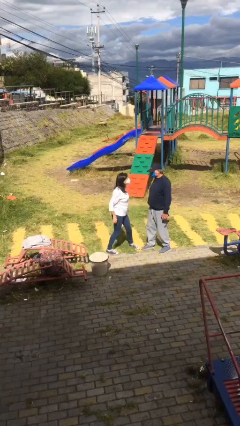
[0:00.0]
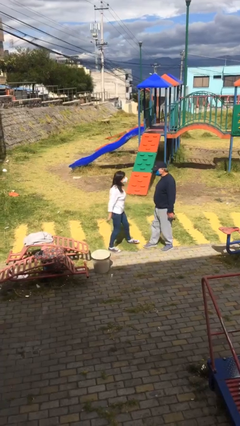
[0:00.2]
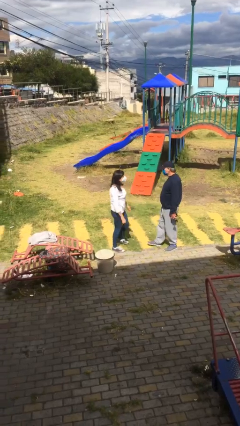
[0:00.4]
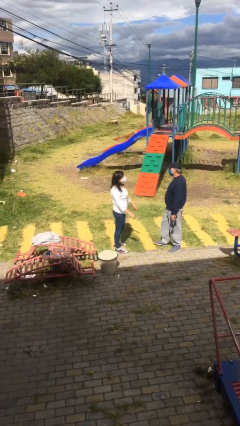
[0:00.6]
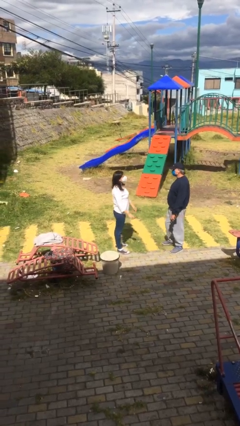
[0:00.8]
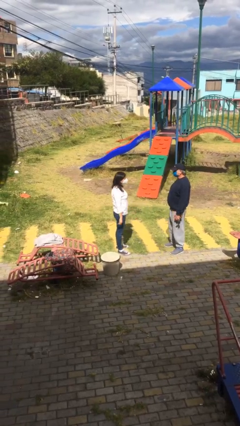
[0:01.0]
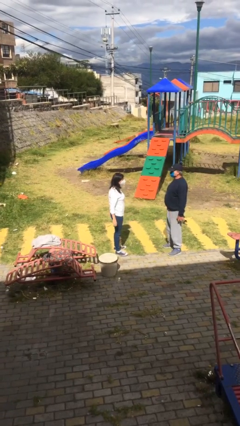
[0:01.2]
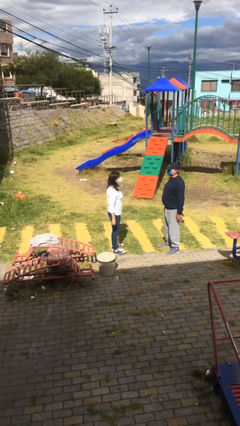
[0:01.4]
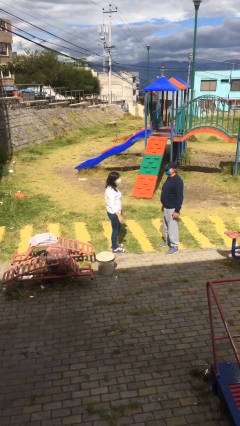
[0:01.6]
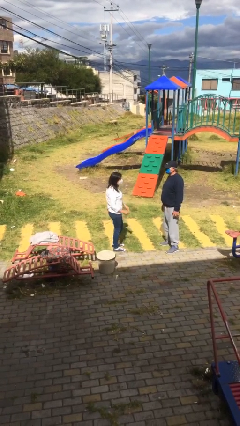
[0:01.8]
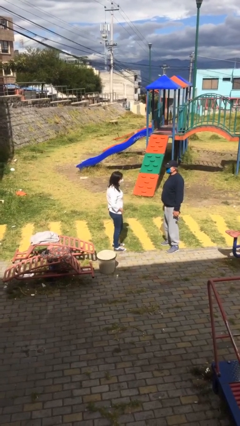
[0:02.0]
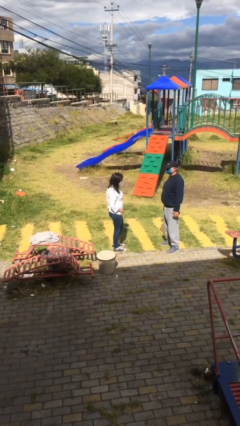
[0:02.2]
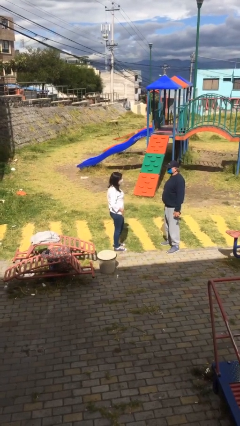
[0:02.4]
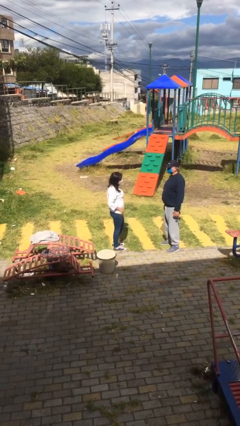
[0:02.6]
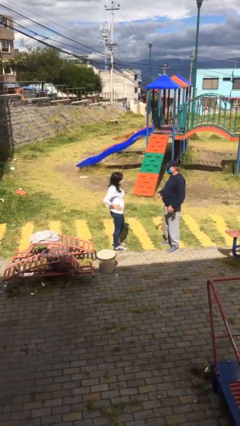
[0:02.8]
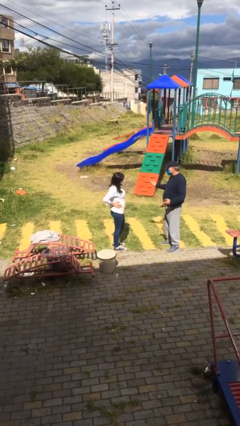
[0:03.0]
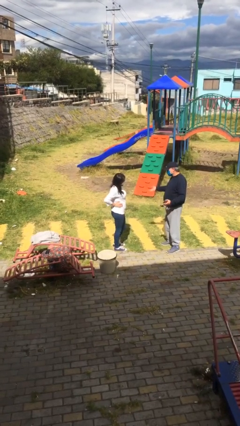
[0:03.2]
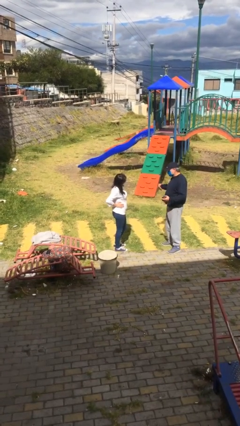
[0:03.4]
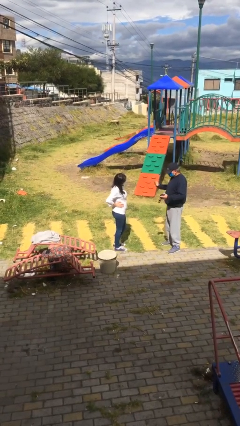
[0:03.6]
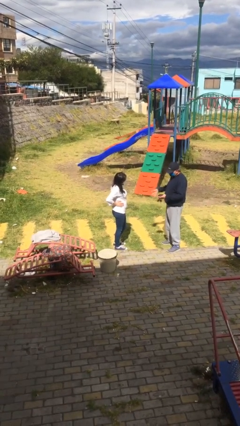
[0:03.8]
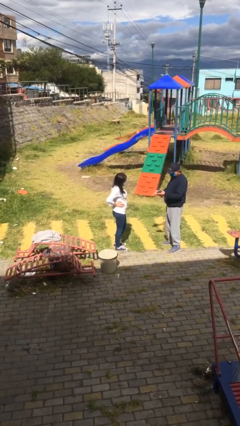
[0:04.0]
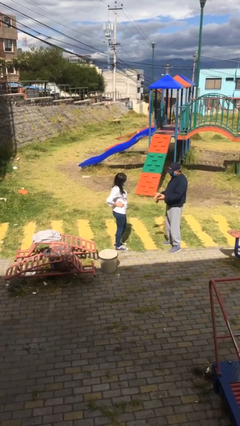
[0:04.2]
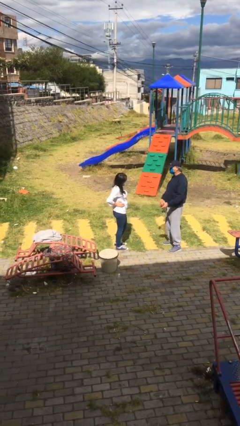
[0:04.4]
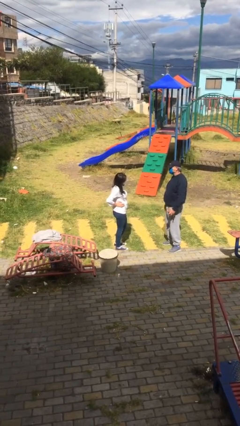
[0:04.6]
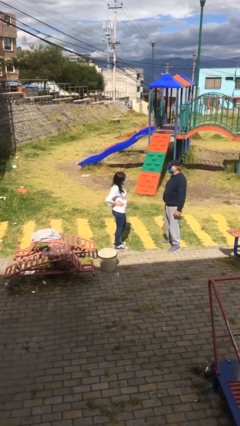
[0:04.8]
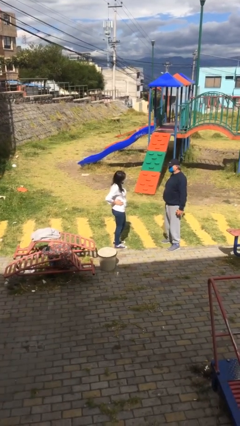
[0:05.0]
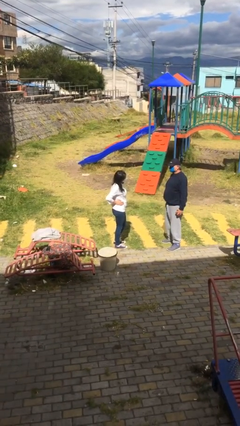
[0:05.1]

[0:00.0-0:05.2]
person talks to person

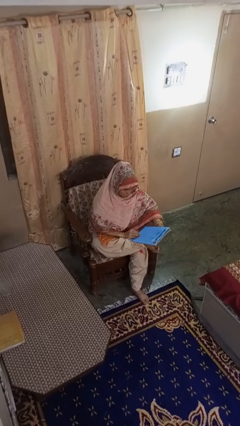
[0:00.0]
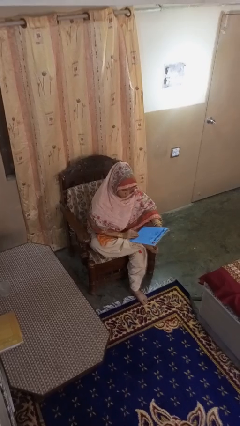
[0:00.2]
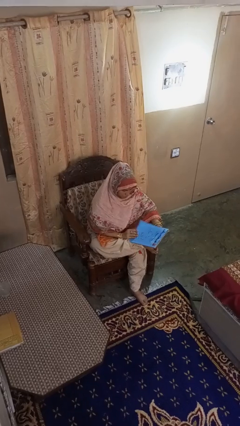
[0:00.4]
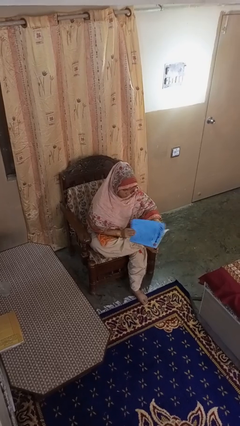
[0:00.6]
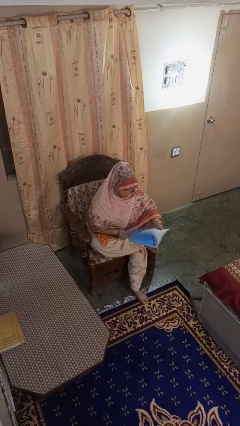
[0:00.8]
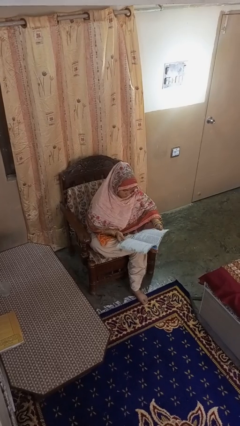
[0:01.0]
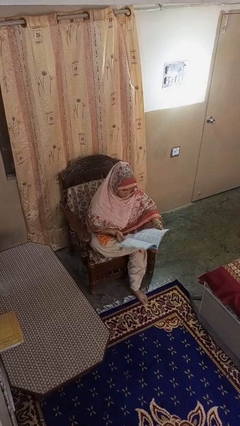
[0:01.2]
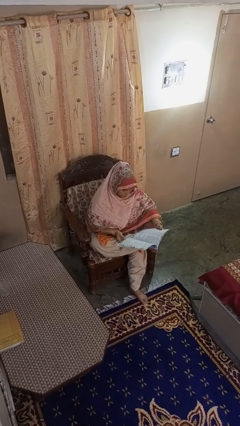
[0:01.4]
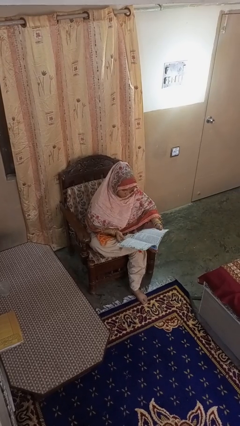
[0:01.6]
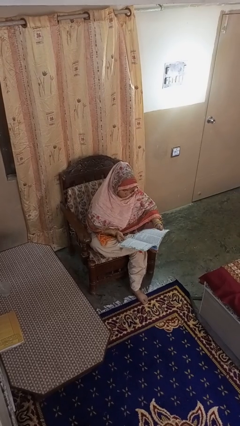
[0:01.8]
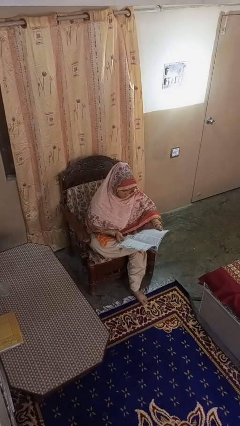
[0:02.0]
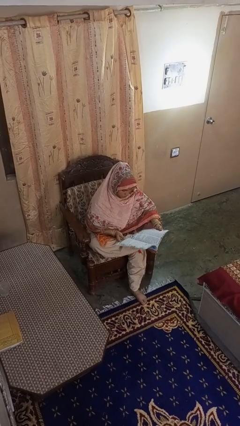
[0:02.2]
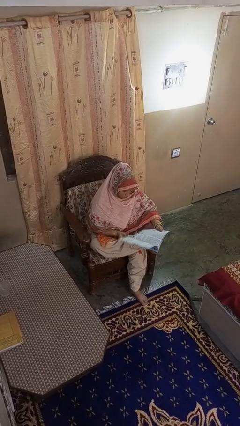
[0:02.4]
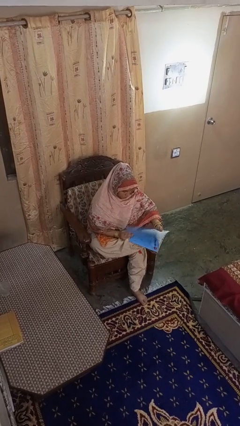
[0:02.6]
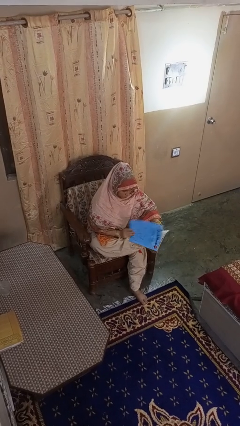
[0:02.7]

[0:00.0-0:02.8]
person reads magazine

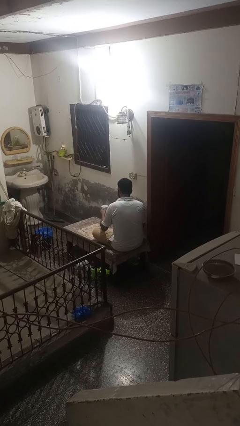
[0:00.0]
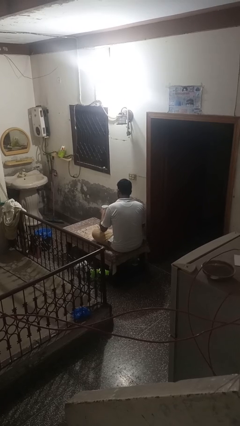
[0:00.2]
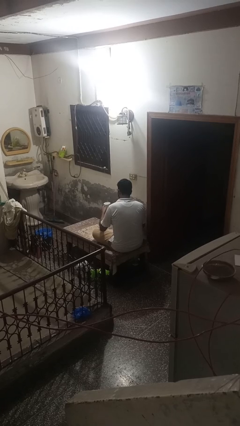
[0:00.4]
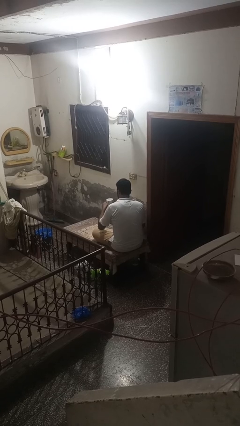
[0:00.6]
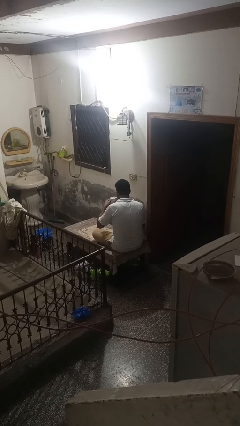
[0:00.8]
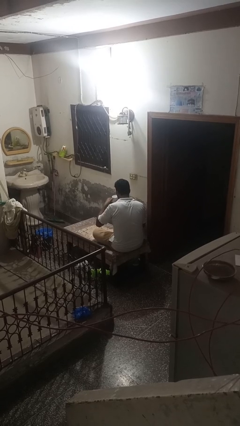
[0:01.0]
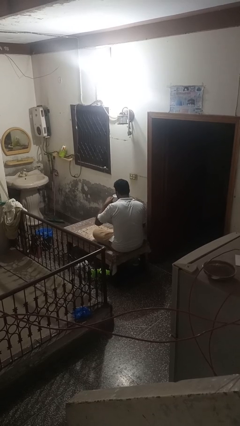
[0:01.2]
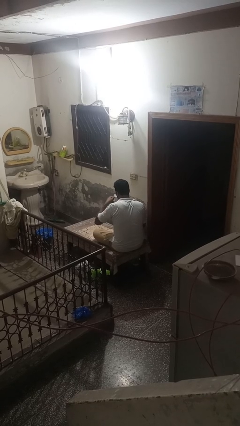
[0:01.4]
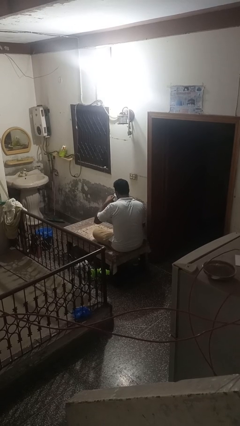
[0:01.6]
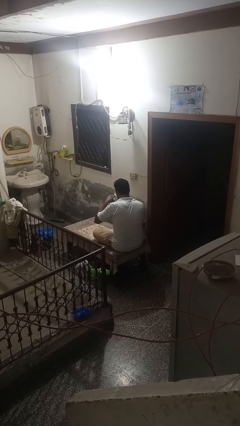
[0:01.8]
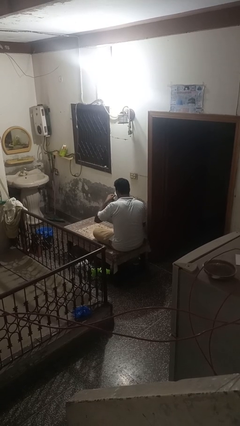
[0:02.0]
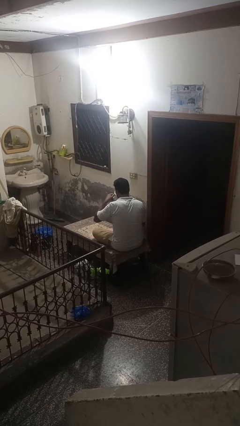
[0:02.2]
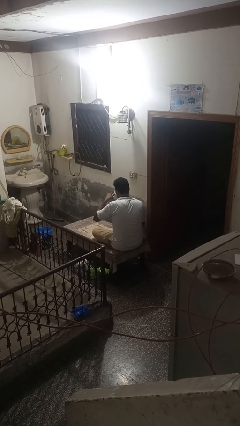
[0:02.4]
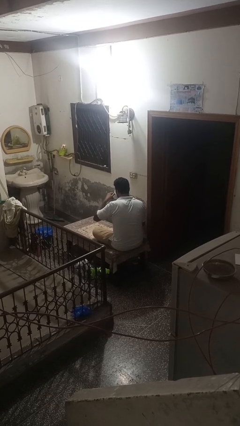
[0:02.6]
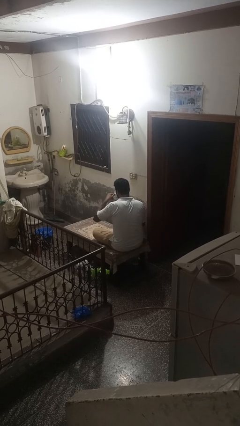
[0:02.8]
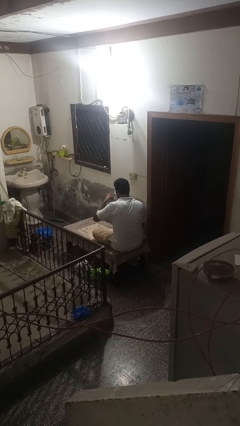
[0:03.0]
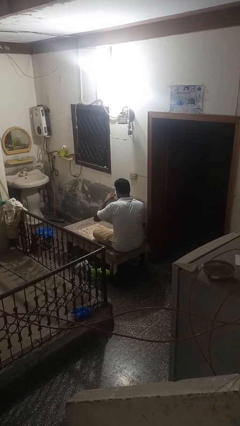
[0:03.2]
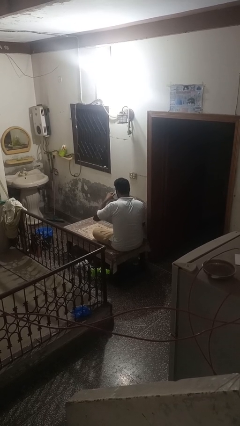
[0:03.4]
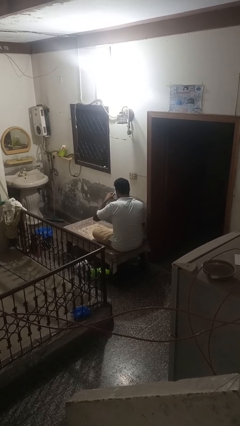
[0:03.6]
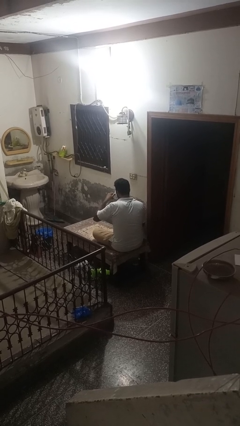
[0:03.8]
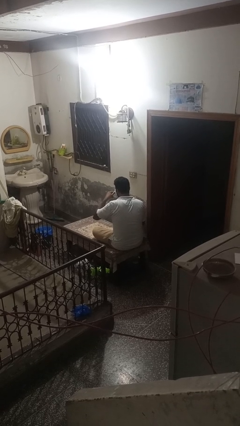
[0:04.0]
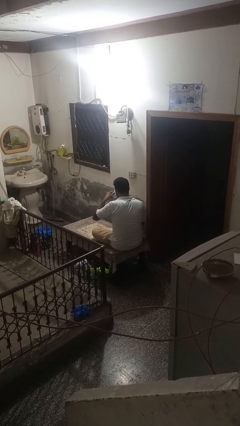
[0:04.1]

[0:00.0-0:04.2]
person drinks from mug

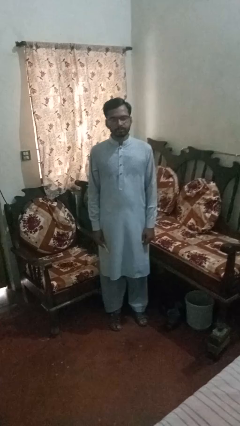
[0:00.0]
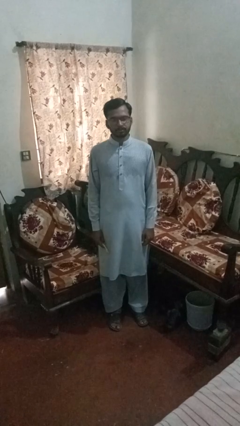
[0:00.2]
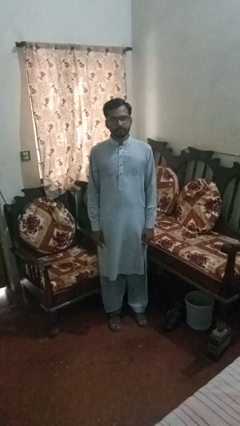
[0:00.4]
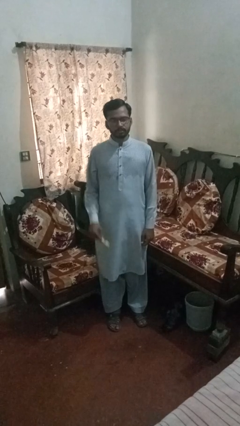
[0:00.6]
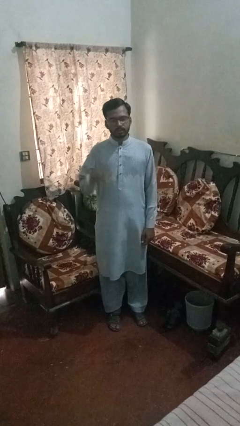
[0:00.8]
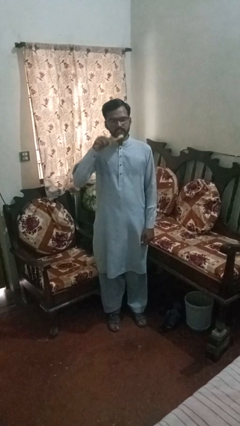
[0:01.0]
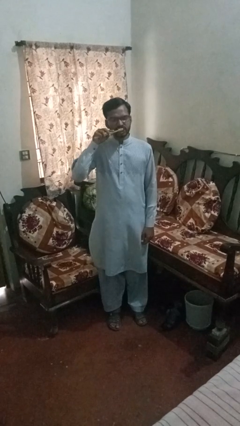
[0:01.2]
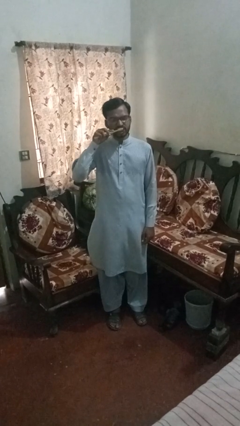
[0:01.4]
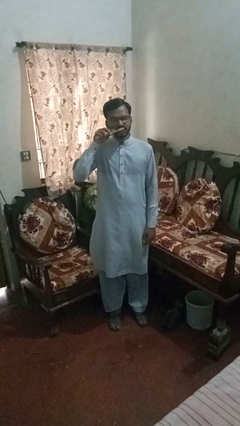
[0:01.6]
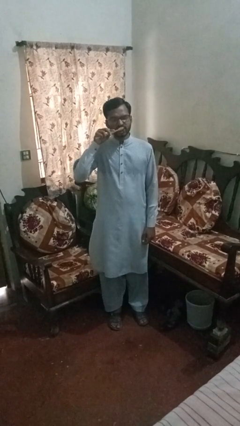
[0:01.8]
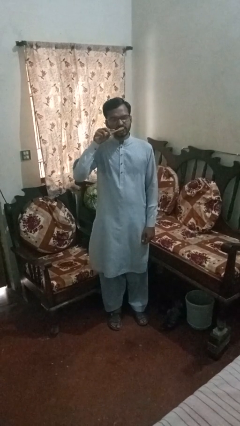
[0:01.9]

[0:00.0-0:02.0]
person brushes teeth

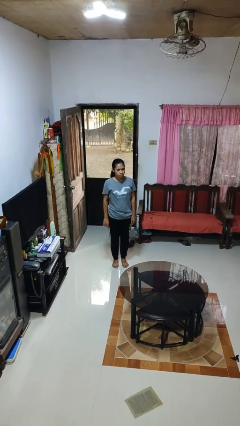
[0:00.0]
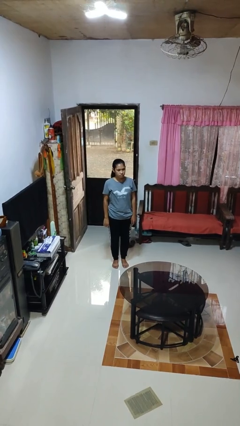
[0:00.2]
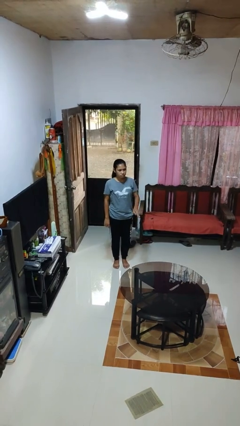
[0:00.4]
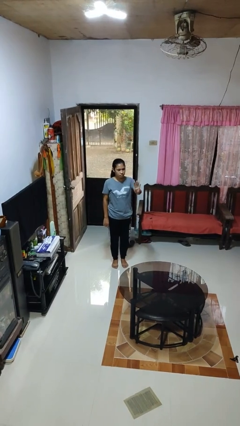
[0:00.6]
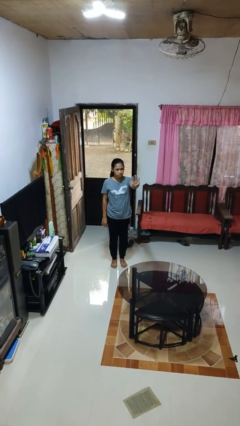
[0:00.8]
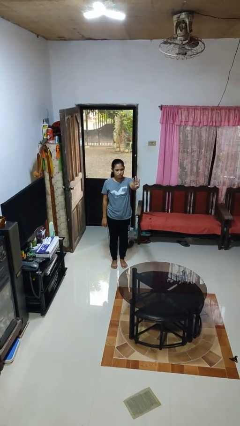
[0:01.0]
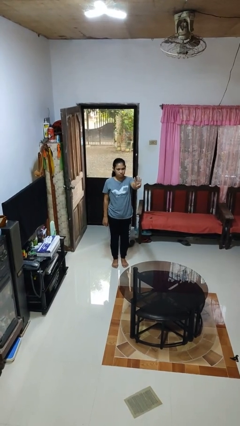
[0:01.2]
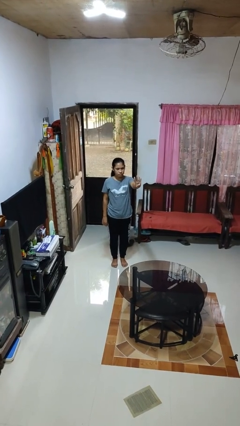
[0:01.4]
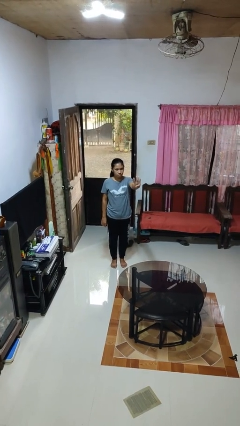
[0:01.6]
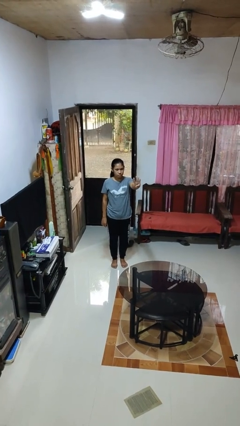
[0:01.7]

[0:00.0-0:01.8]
person gestures number four

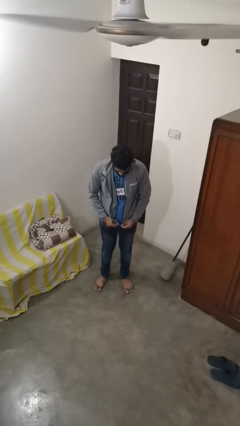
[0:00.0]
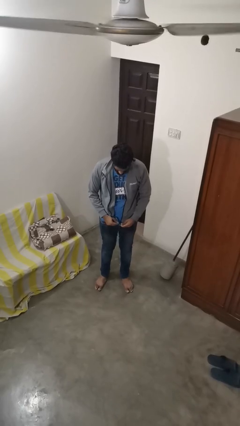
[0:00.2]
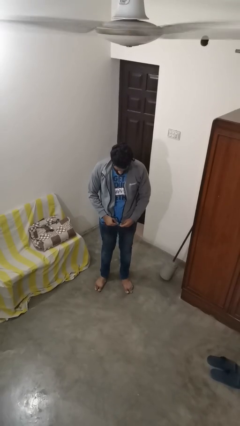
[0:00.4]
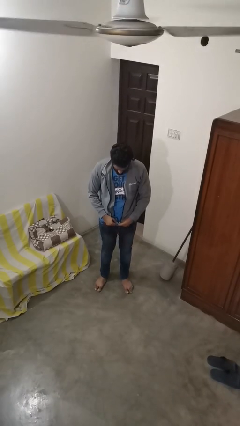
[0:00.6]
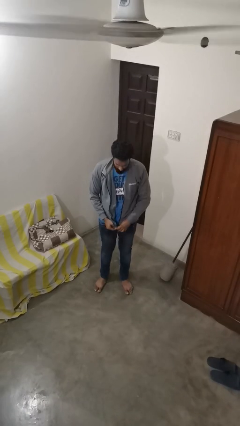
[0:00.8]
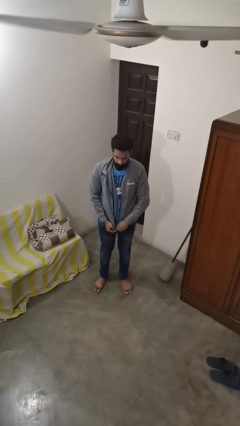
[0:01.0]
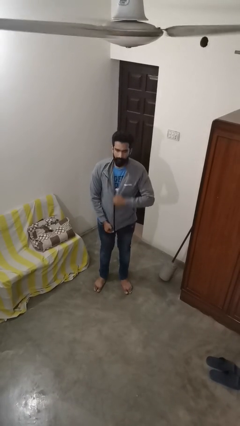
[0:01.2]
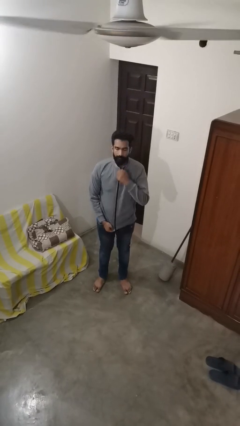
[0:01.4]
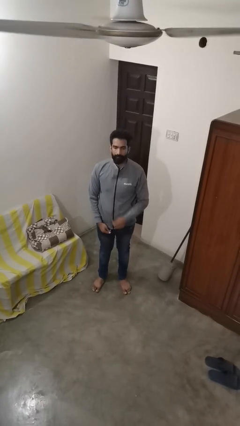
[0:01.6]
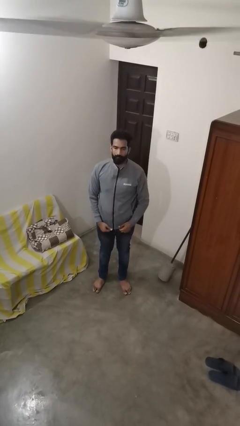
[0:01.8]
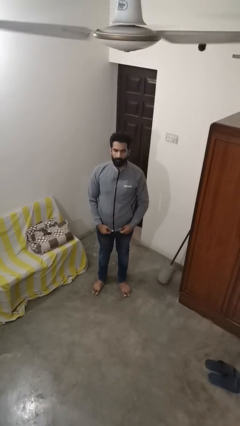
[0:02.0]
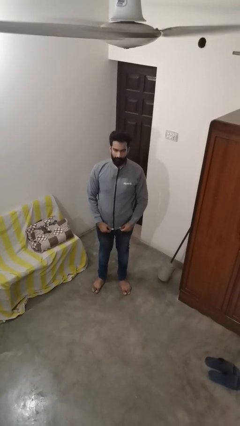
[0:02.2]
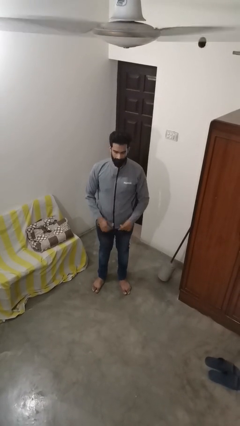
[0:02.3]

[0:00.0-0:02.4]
person zips up jacket
